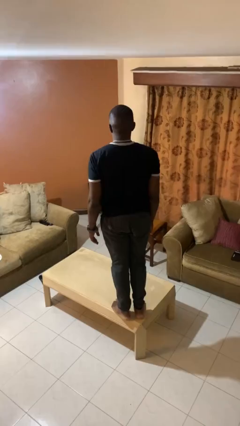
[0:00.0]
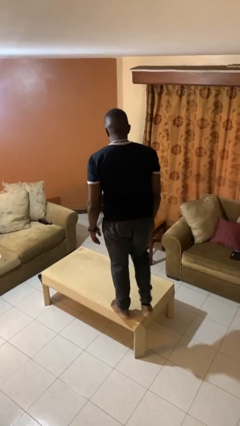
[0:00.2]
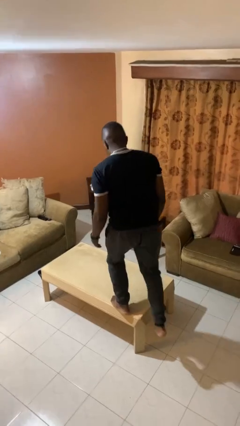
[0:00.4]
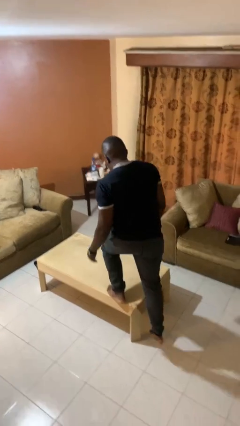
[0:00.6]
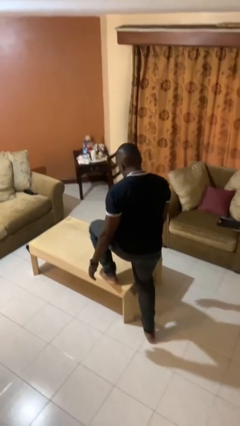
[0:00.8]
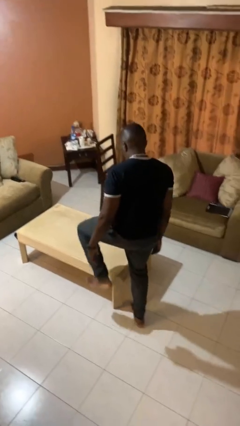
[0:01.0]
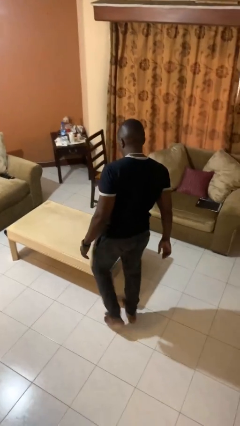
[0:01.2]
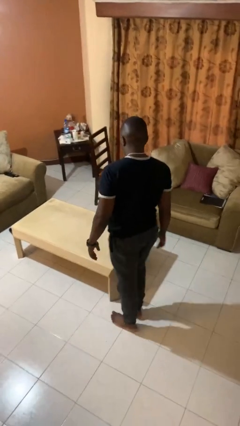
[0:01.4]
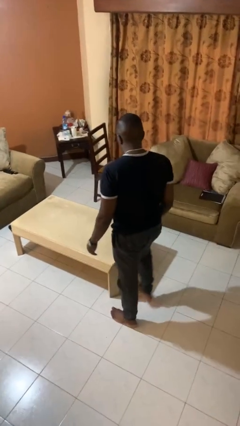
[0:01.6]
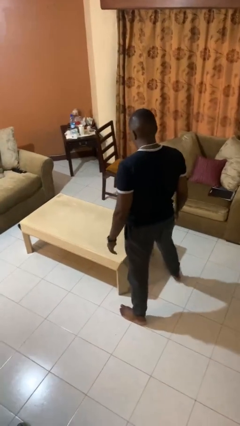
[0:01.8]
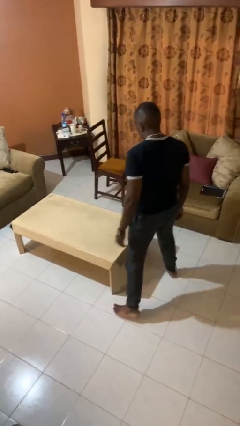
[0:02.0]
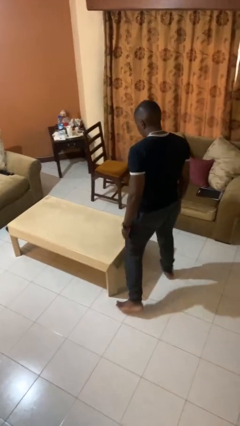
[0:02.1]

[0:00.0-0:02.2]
person climbs off table

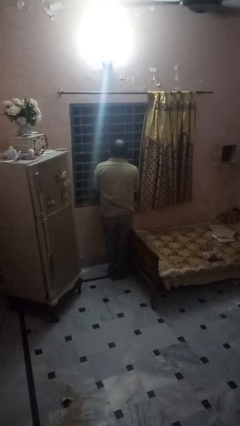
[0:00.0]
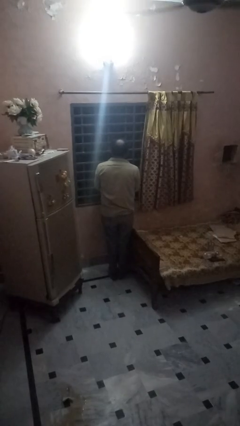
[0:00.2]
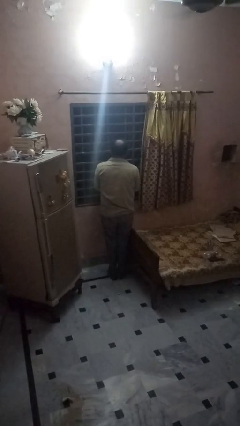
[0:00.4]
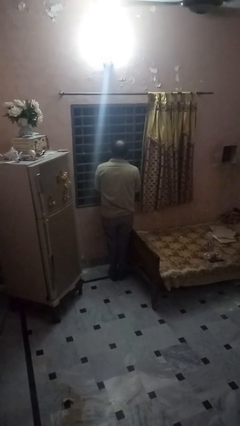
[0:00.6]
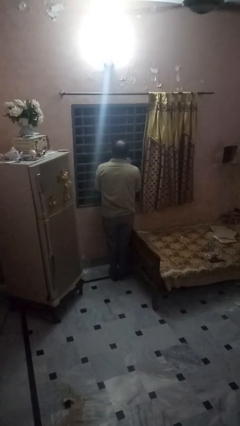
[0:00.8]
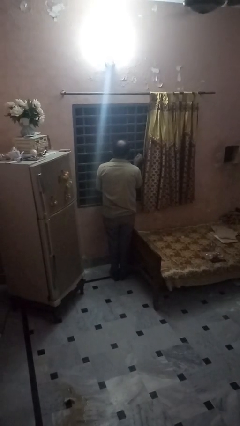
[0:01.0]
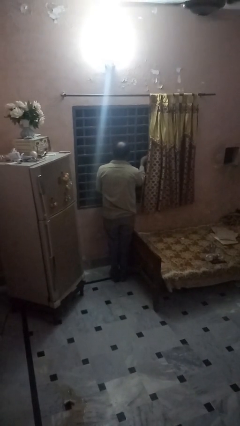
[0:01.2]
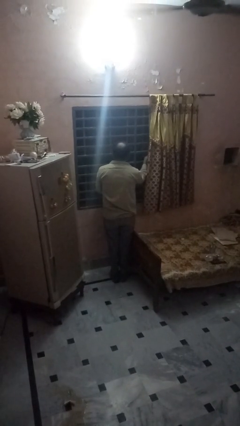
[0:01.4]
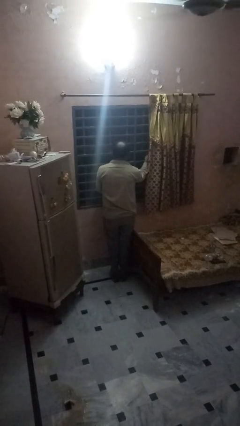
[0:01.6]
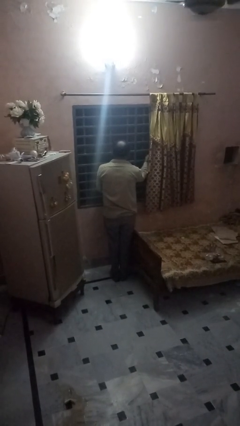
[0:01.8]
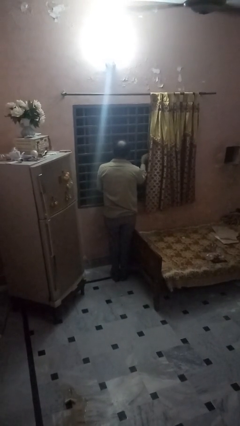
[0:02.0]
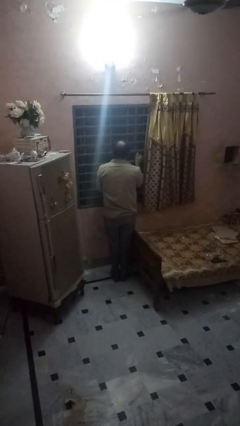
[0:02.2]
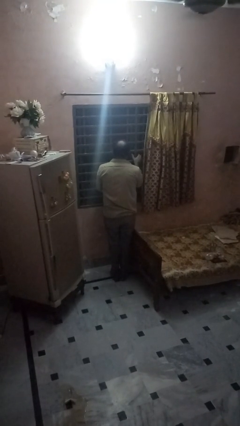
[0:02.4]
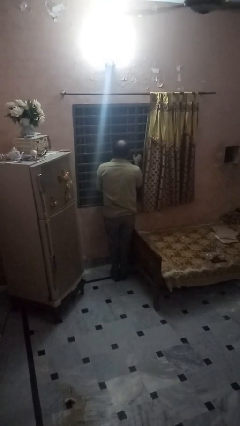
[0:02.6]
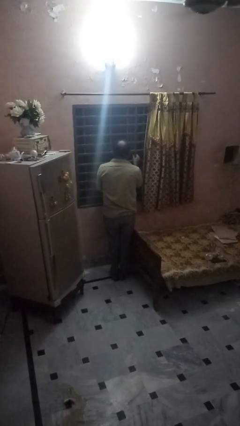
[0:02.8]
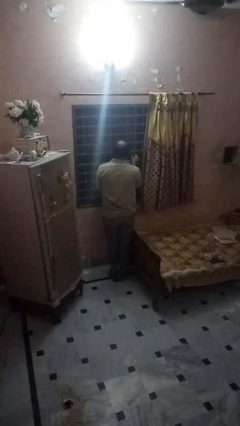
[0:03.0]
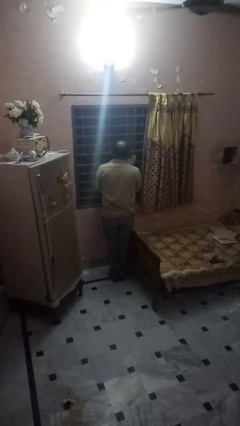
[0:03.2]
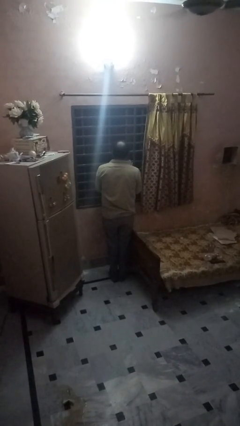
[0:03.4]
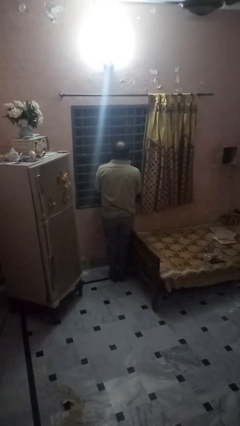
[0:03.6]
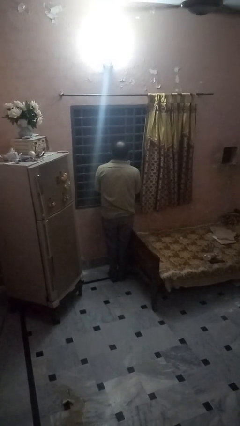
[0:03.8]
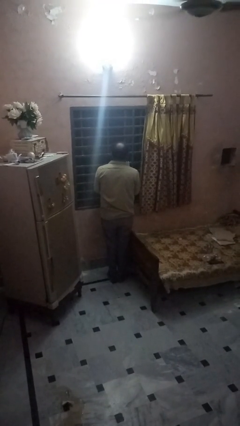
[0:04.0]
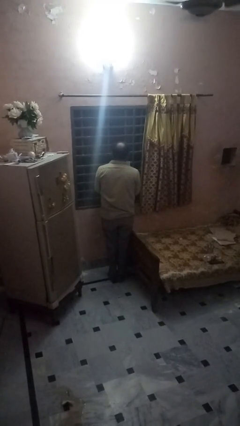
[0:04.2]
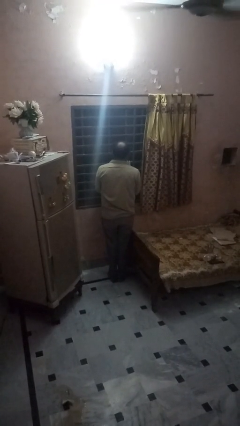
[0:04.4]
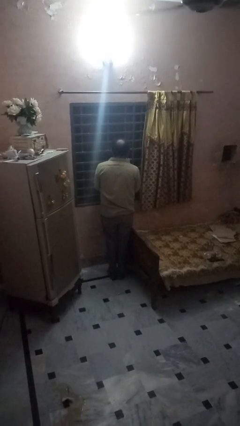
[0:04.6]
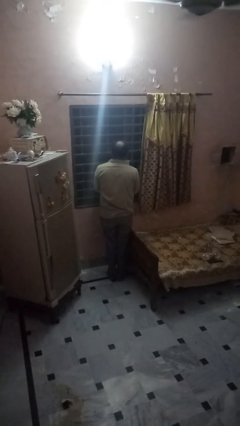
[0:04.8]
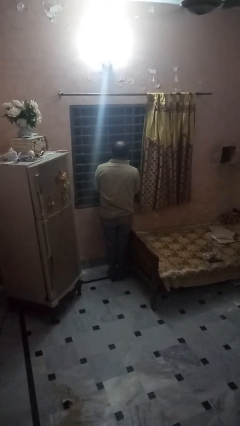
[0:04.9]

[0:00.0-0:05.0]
person closes home window

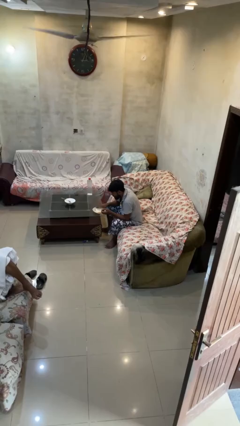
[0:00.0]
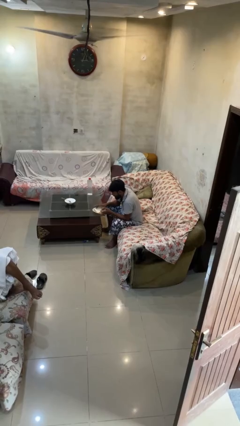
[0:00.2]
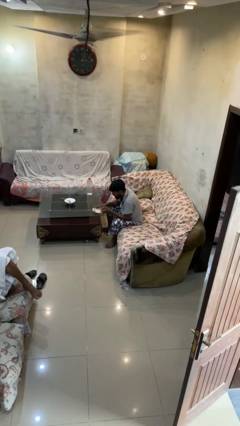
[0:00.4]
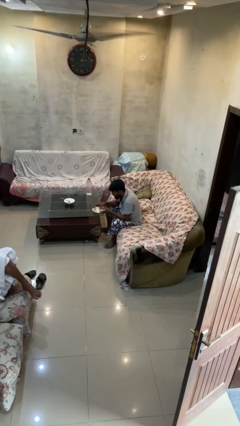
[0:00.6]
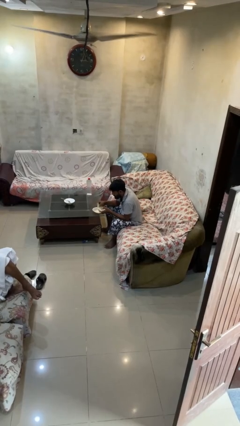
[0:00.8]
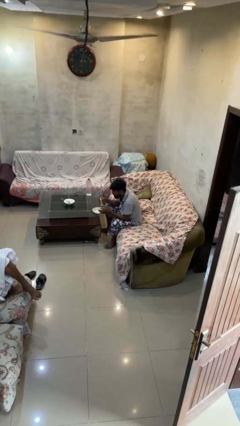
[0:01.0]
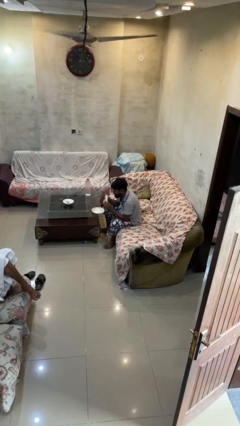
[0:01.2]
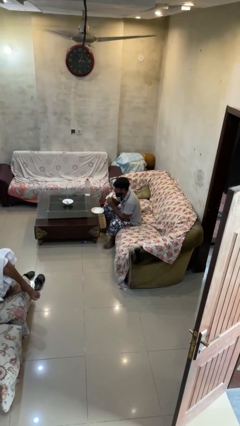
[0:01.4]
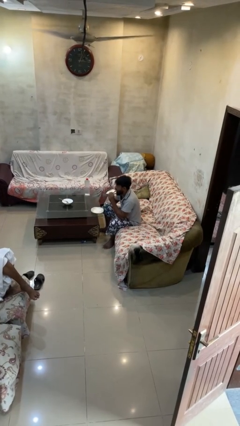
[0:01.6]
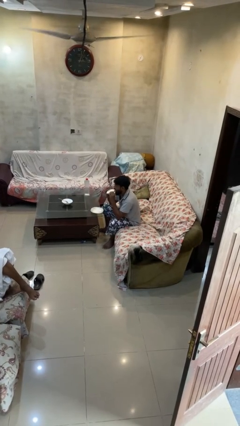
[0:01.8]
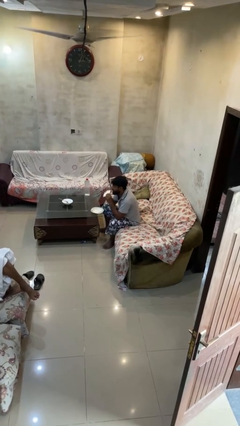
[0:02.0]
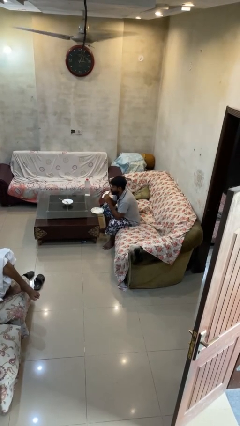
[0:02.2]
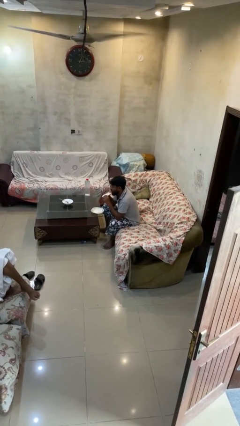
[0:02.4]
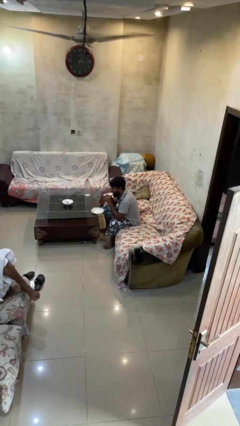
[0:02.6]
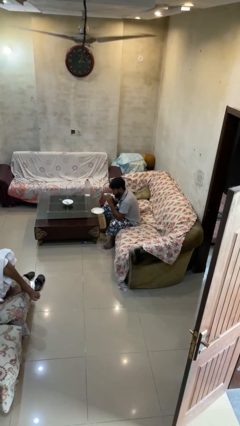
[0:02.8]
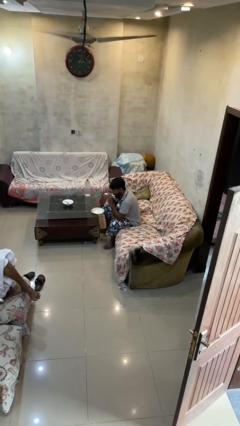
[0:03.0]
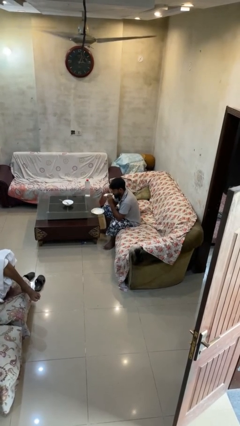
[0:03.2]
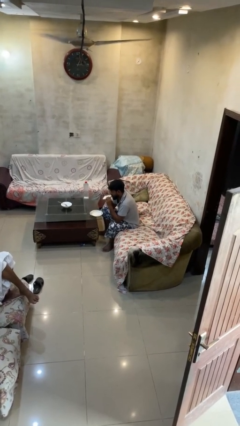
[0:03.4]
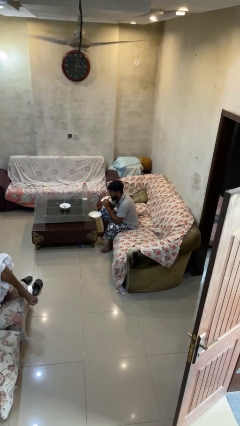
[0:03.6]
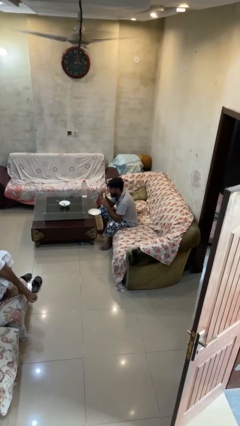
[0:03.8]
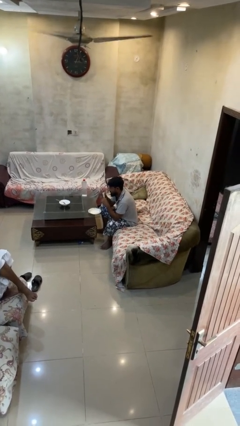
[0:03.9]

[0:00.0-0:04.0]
person eats with hands

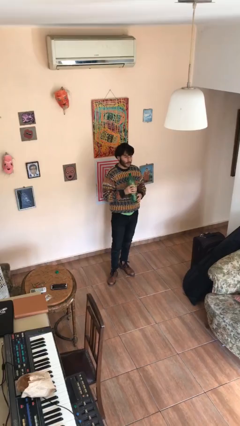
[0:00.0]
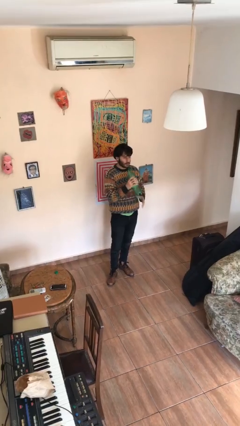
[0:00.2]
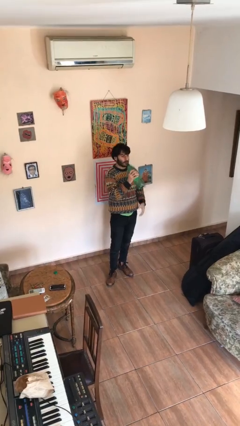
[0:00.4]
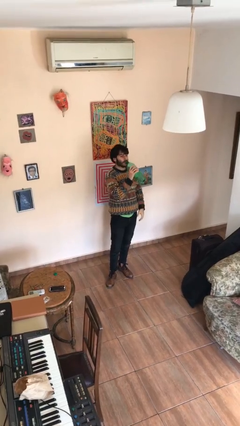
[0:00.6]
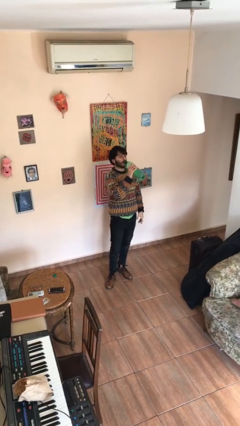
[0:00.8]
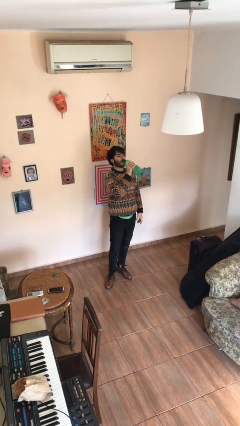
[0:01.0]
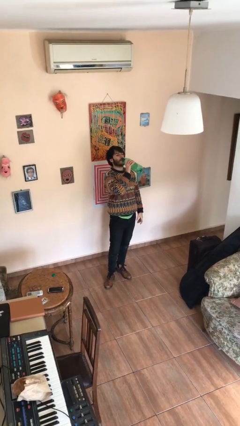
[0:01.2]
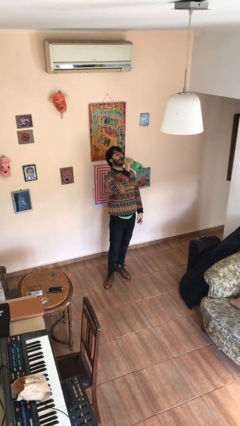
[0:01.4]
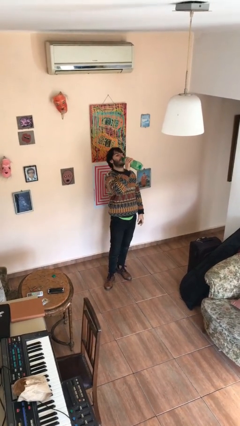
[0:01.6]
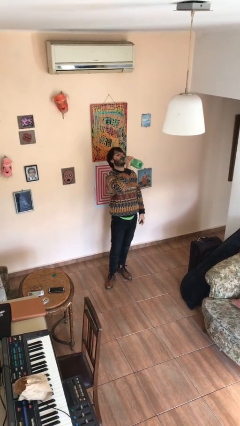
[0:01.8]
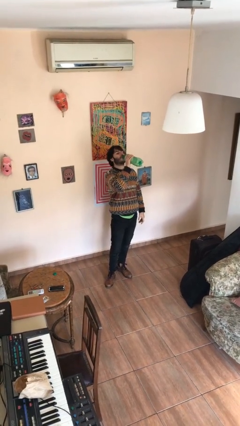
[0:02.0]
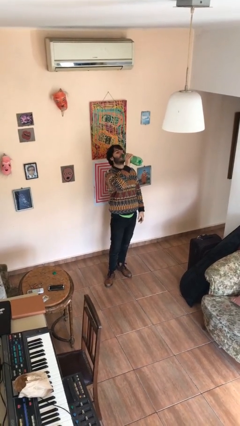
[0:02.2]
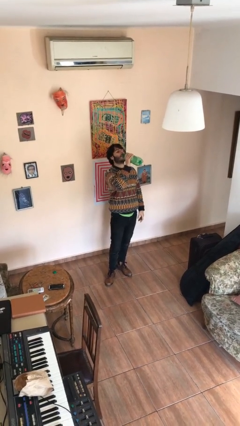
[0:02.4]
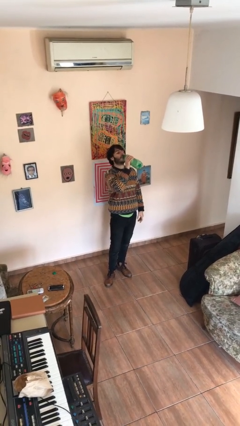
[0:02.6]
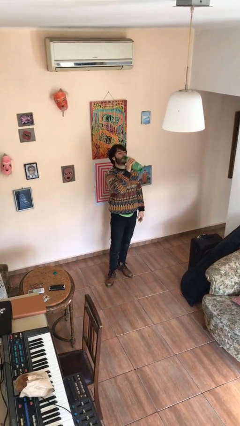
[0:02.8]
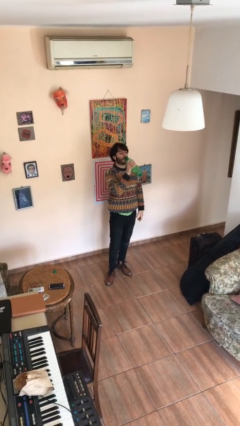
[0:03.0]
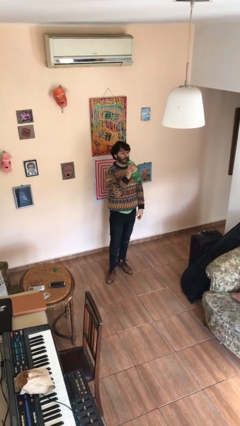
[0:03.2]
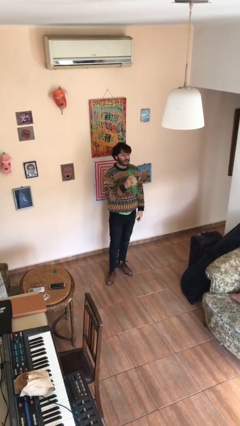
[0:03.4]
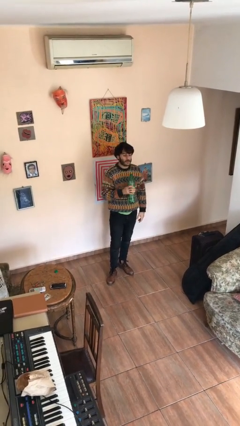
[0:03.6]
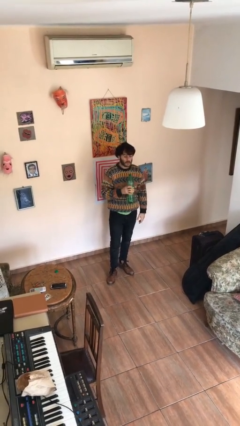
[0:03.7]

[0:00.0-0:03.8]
person drinks from bottle

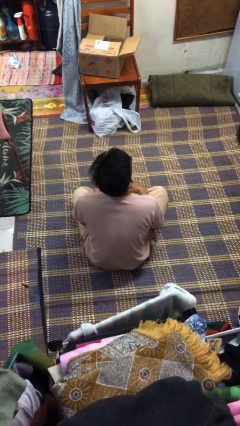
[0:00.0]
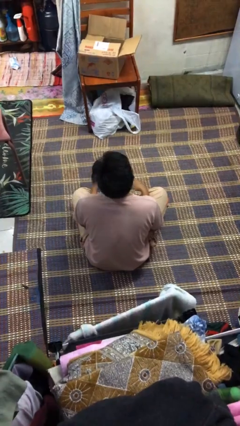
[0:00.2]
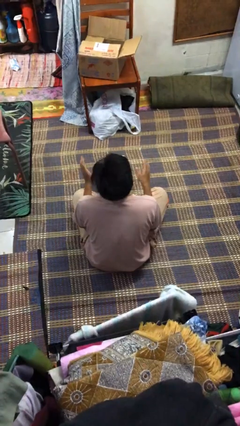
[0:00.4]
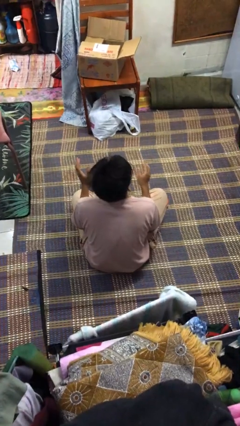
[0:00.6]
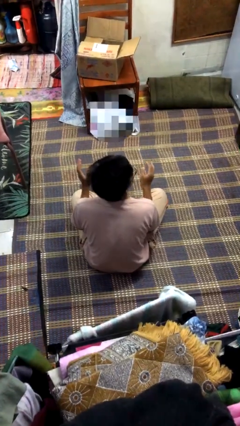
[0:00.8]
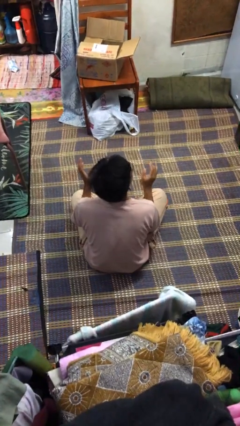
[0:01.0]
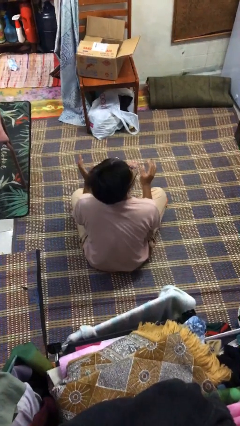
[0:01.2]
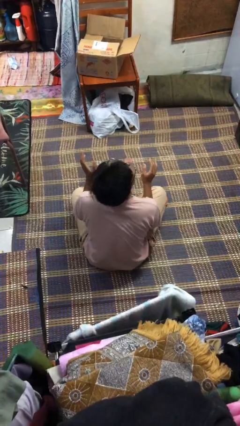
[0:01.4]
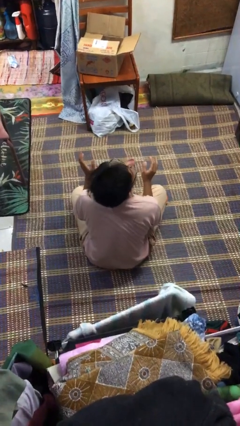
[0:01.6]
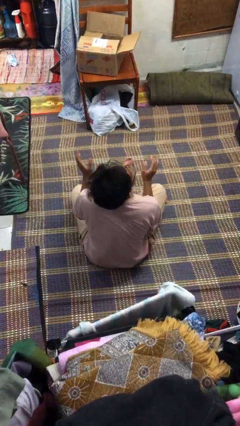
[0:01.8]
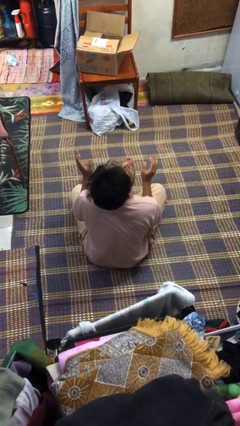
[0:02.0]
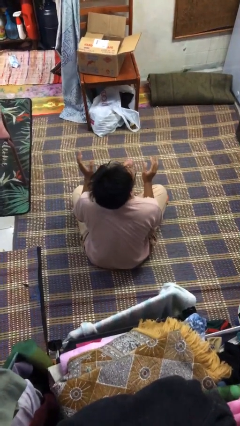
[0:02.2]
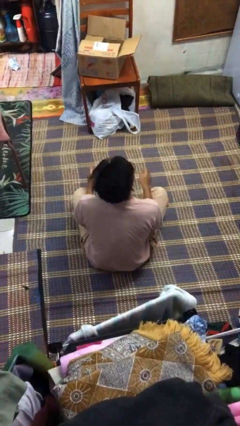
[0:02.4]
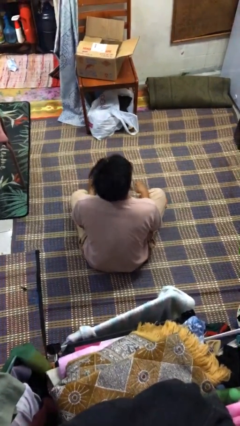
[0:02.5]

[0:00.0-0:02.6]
person sticks out tongue

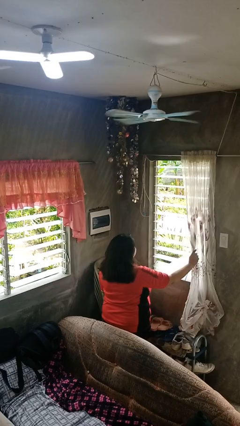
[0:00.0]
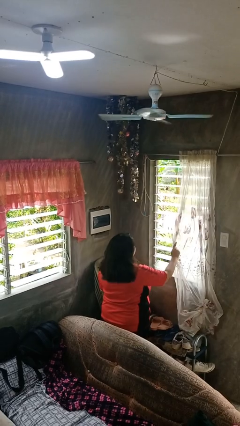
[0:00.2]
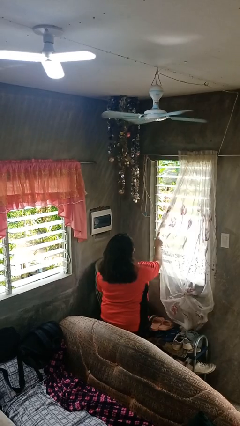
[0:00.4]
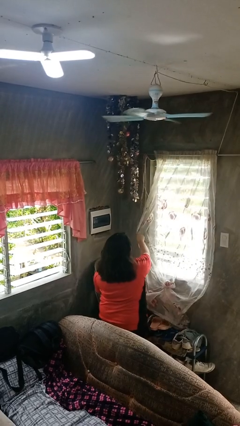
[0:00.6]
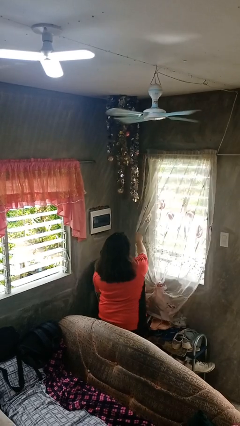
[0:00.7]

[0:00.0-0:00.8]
person closes curtains
